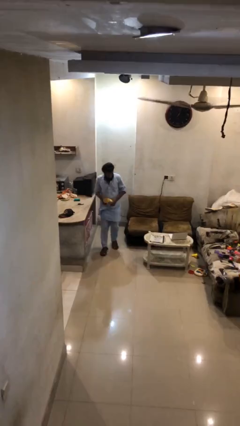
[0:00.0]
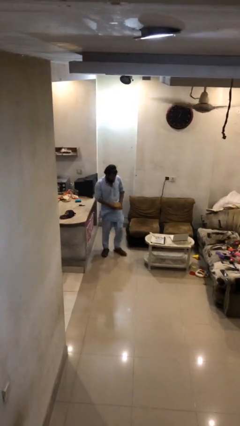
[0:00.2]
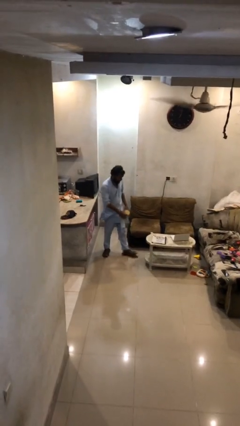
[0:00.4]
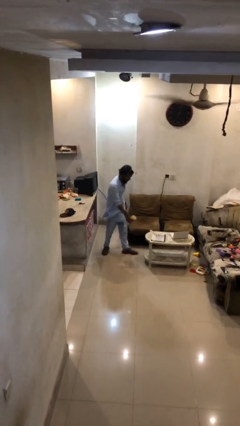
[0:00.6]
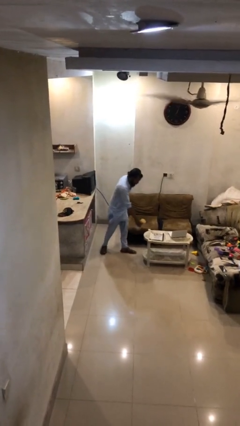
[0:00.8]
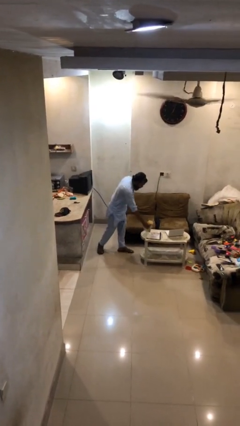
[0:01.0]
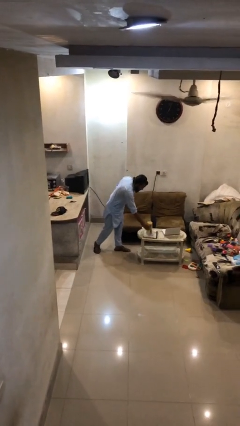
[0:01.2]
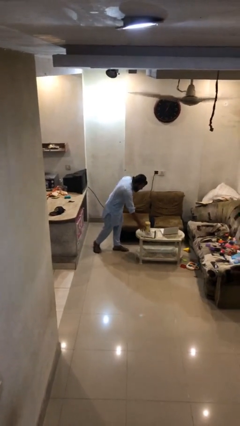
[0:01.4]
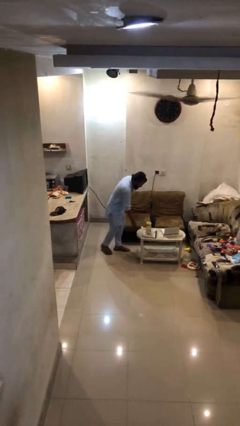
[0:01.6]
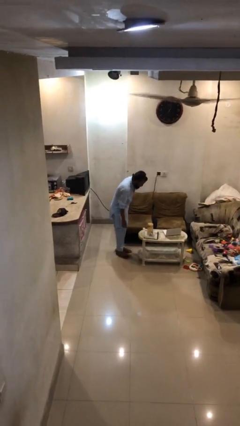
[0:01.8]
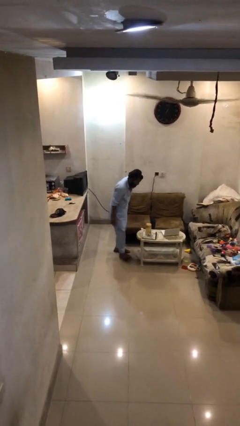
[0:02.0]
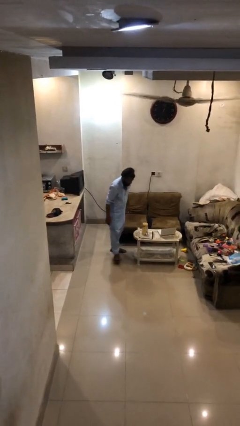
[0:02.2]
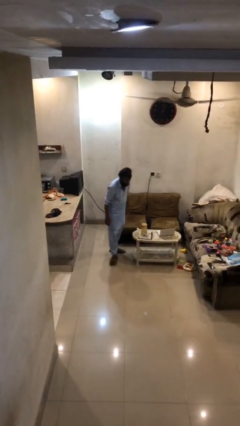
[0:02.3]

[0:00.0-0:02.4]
person puts down object on table

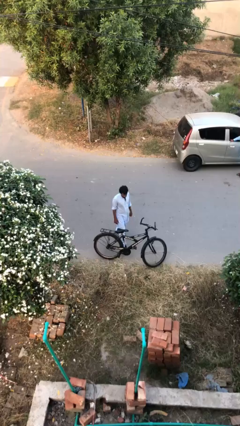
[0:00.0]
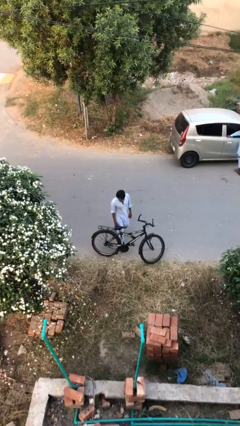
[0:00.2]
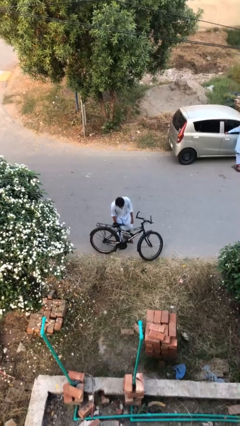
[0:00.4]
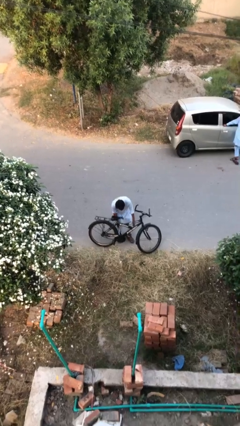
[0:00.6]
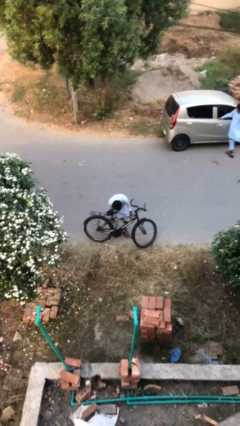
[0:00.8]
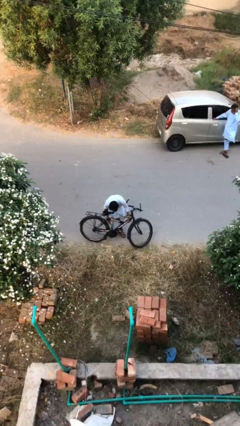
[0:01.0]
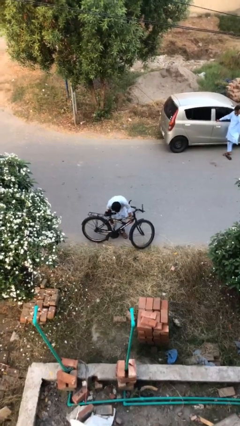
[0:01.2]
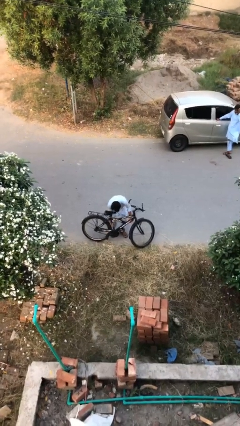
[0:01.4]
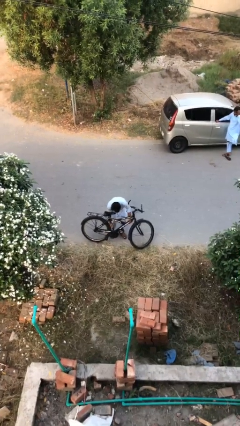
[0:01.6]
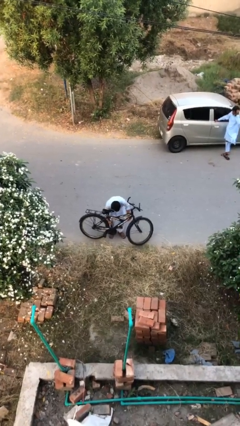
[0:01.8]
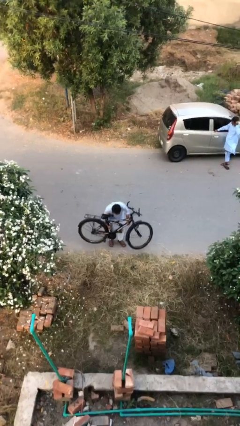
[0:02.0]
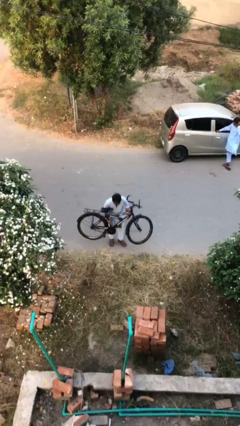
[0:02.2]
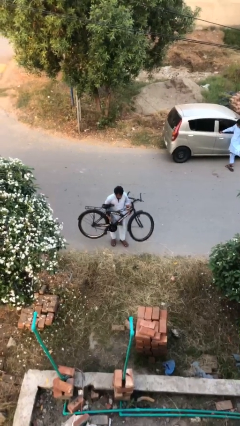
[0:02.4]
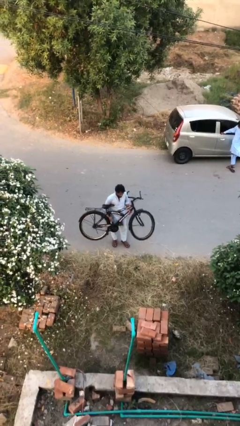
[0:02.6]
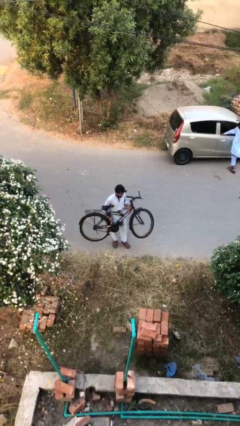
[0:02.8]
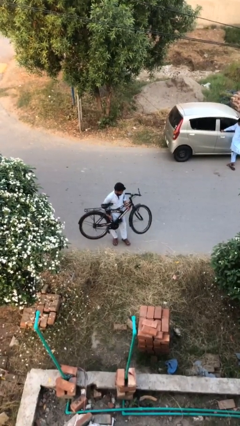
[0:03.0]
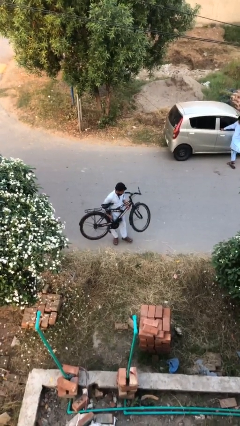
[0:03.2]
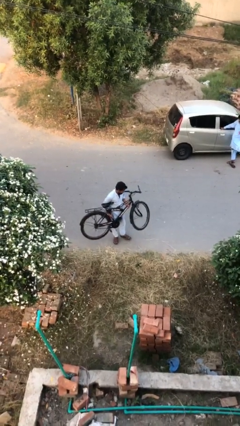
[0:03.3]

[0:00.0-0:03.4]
person picks up object from floor

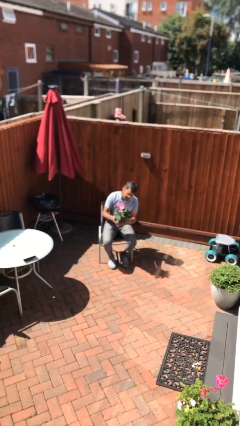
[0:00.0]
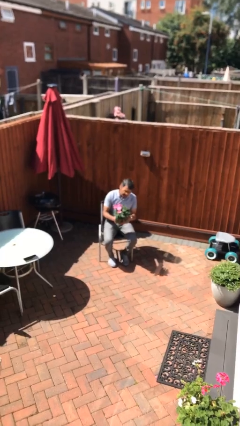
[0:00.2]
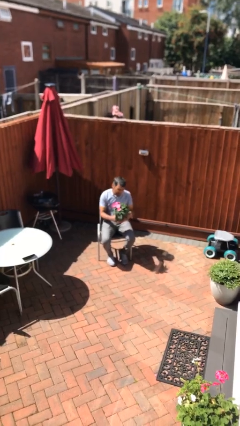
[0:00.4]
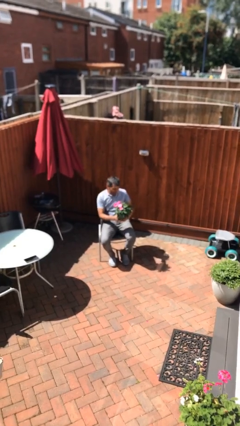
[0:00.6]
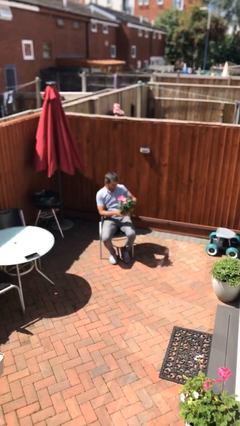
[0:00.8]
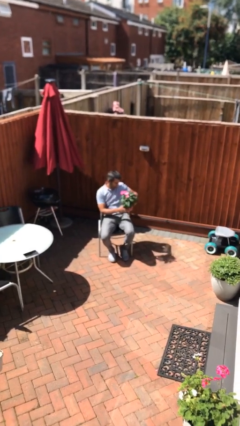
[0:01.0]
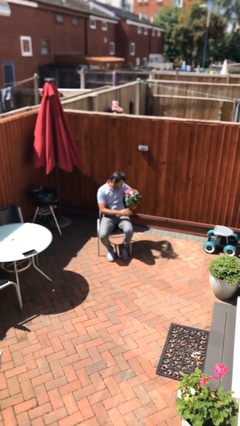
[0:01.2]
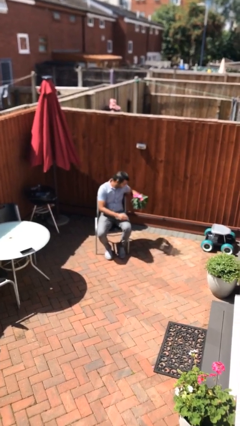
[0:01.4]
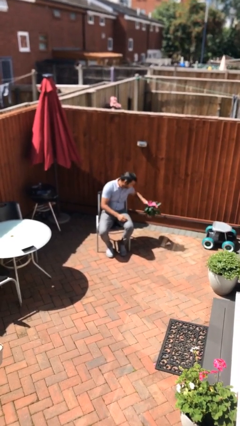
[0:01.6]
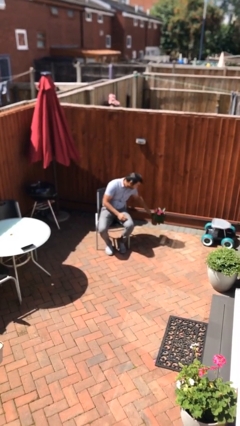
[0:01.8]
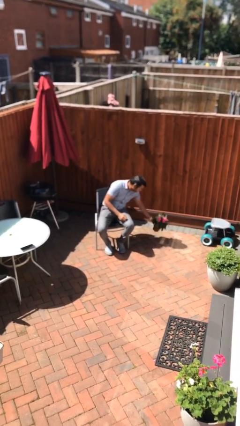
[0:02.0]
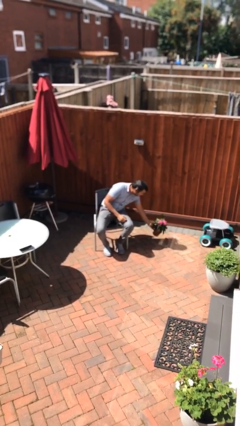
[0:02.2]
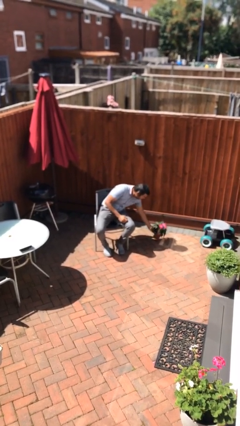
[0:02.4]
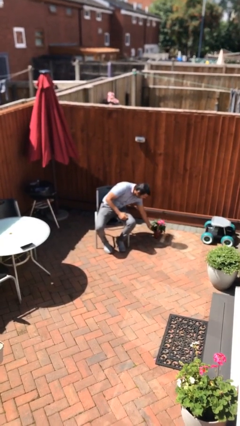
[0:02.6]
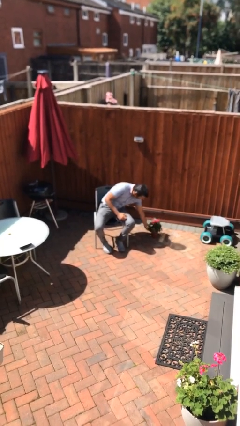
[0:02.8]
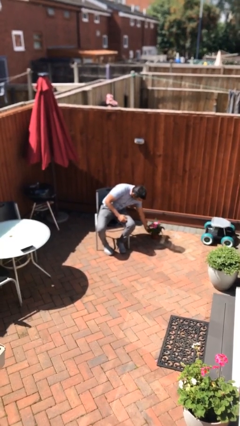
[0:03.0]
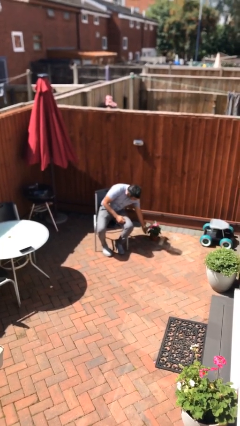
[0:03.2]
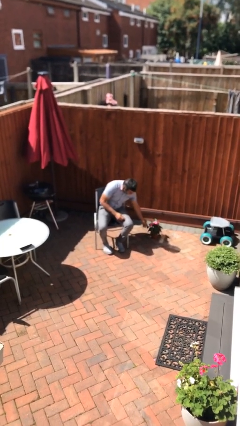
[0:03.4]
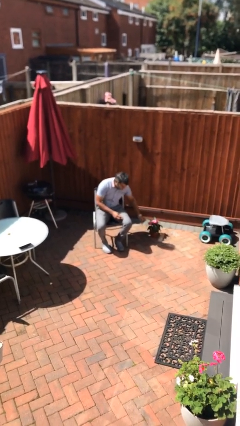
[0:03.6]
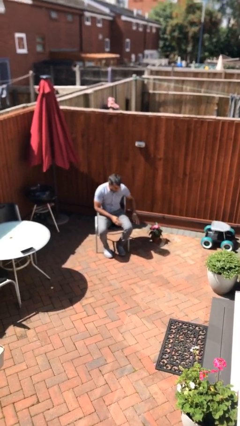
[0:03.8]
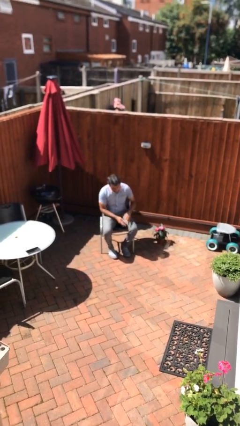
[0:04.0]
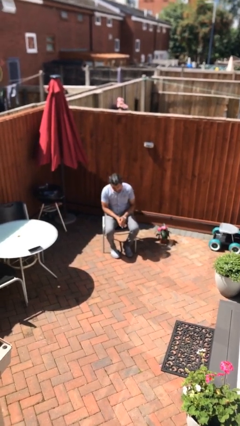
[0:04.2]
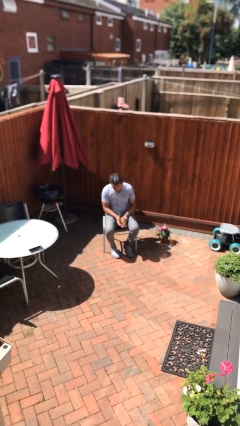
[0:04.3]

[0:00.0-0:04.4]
person puts down object on floor

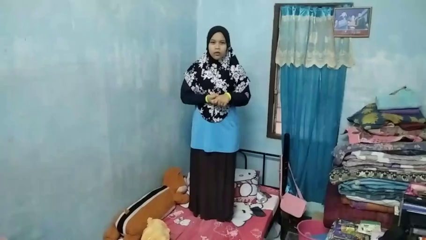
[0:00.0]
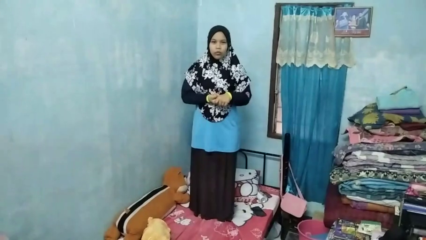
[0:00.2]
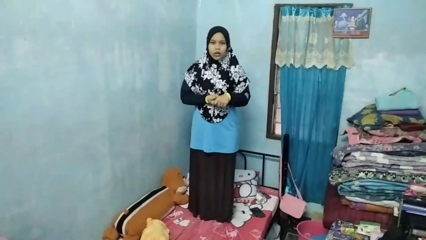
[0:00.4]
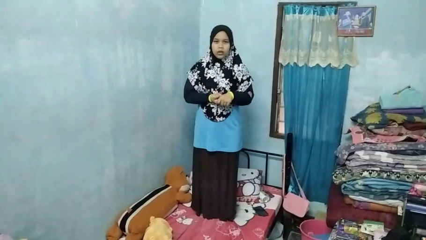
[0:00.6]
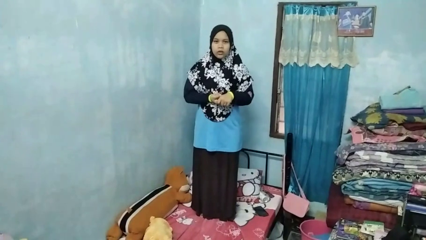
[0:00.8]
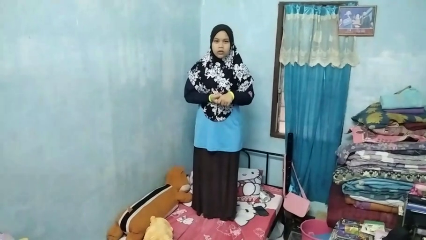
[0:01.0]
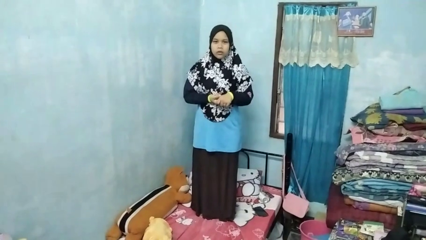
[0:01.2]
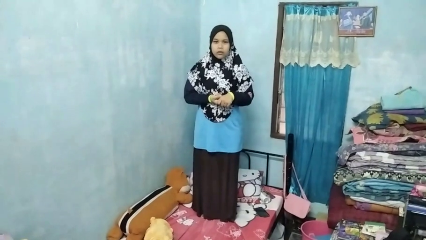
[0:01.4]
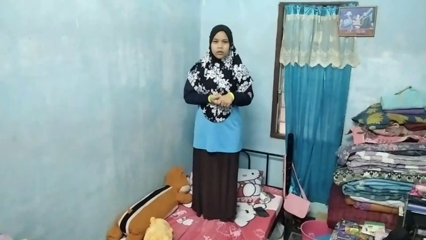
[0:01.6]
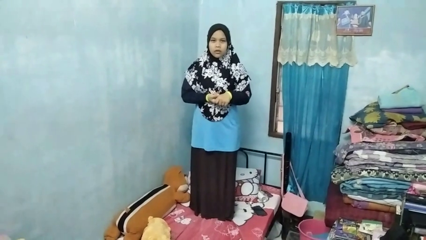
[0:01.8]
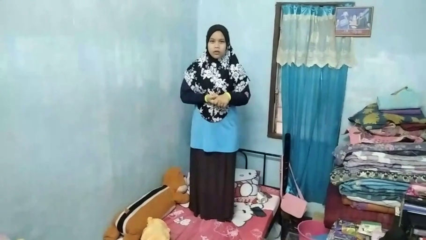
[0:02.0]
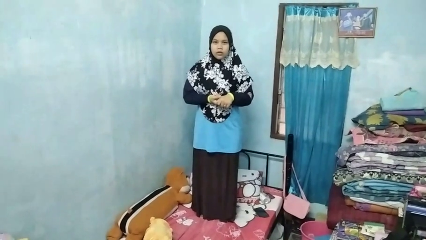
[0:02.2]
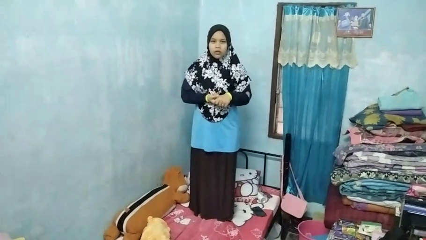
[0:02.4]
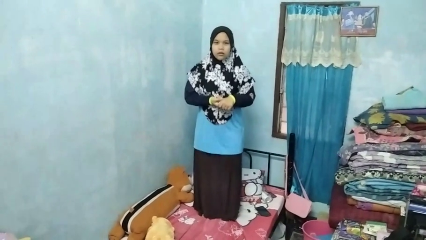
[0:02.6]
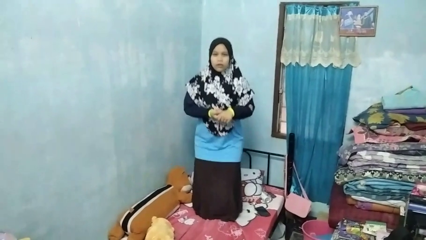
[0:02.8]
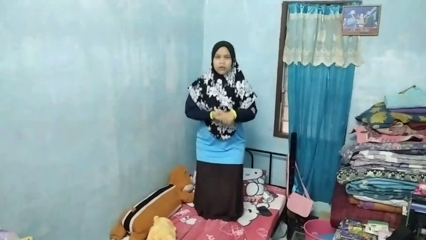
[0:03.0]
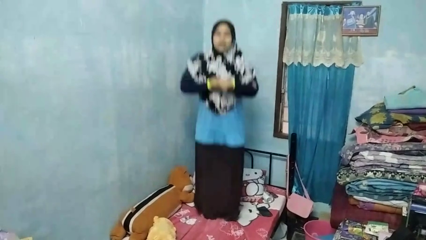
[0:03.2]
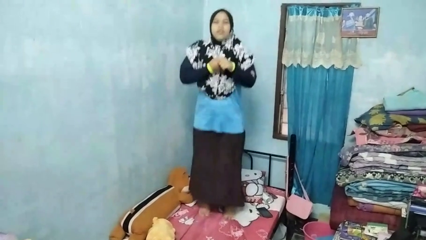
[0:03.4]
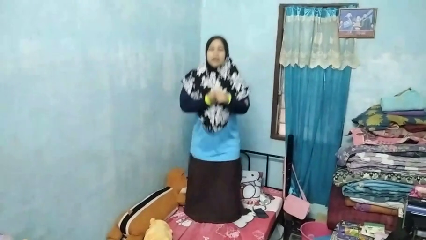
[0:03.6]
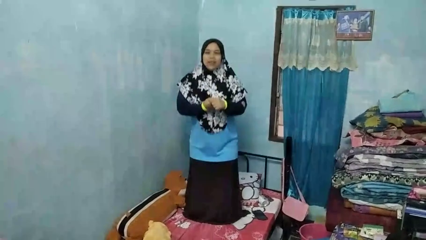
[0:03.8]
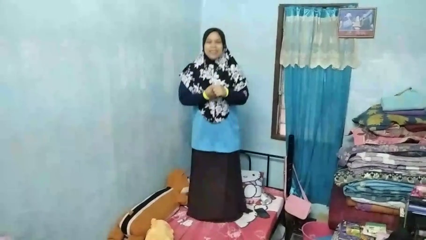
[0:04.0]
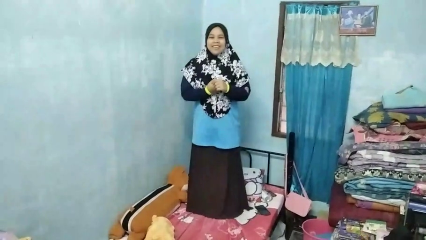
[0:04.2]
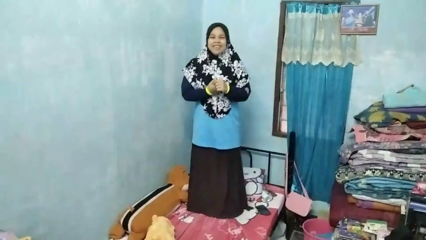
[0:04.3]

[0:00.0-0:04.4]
person jumps on bed

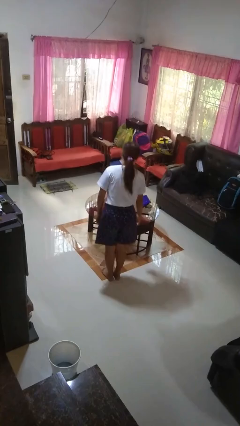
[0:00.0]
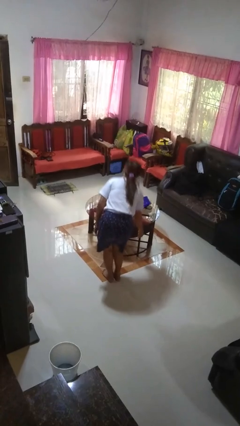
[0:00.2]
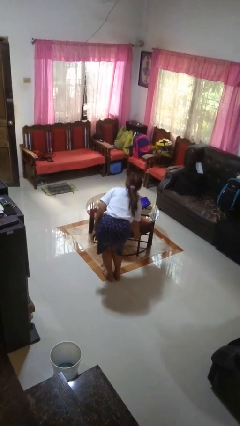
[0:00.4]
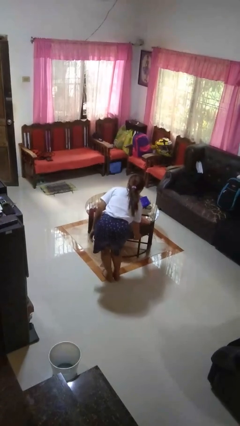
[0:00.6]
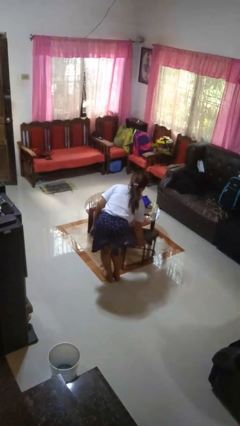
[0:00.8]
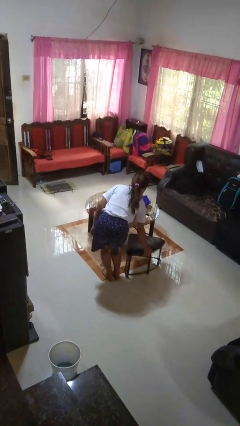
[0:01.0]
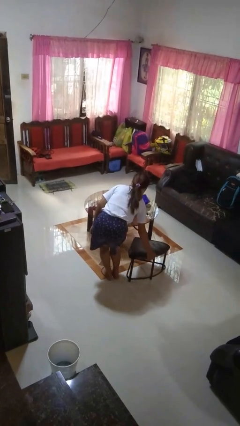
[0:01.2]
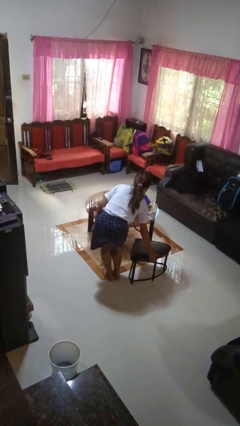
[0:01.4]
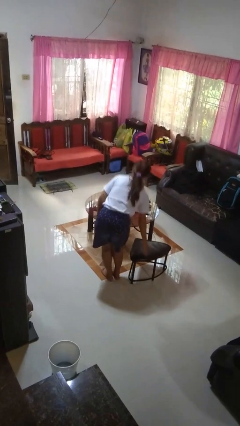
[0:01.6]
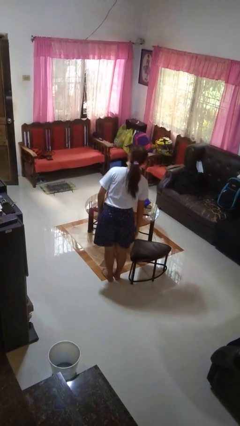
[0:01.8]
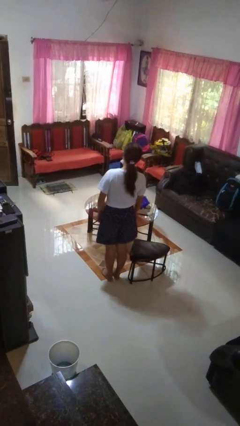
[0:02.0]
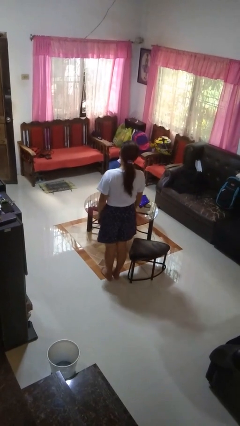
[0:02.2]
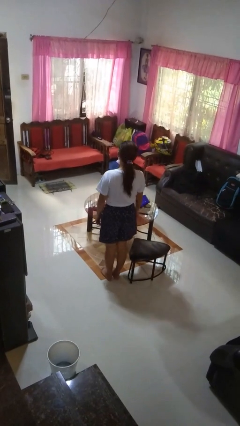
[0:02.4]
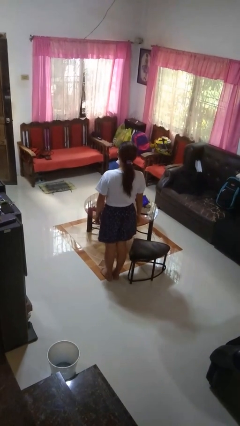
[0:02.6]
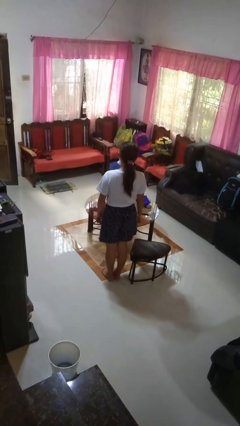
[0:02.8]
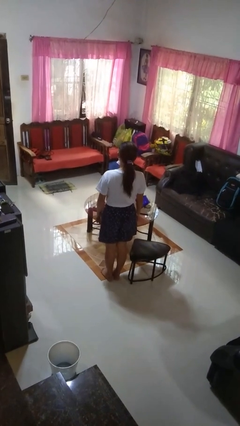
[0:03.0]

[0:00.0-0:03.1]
person pulls out chair
